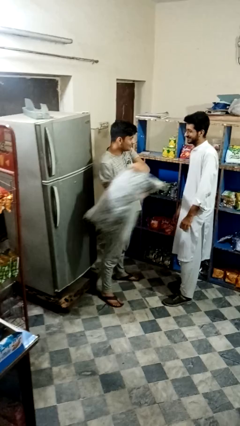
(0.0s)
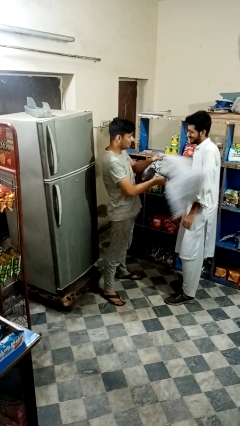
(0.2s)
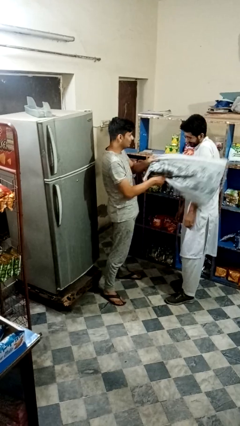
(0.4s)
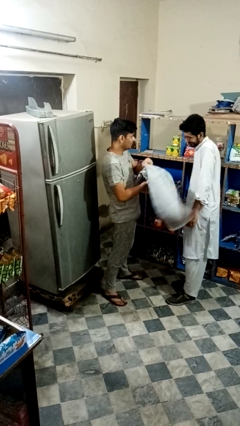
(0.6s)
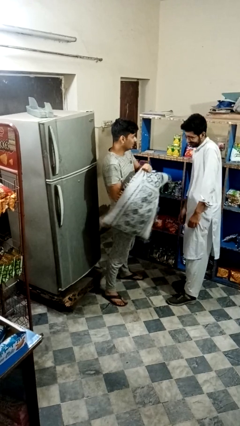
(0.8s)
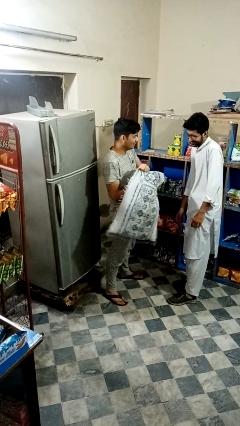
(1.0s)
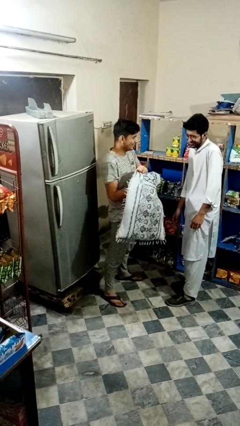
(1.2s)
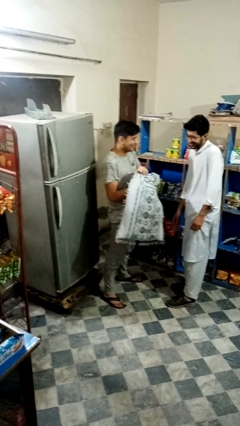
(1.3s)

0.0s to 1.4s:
person hits person with pillow

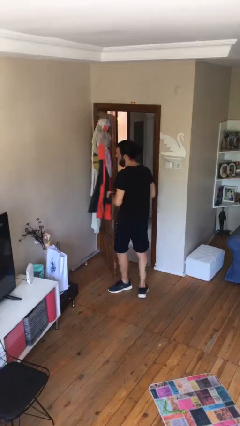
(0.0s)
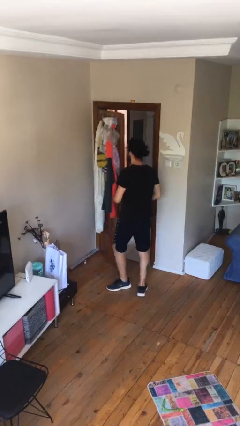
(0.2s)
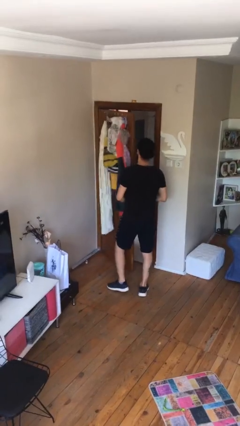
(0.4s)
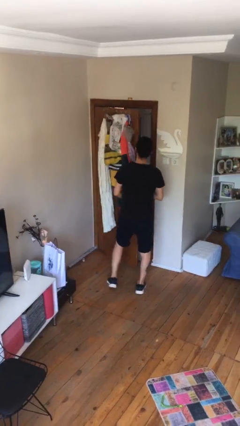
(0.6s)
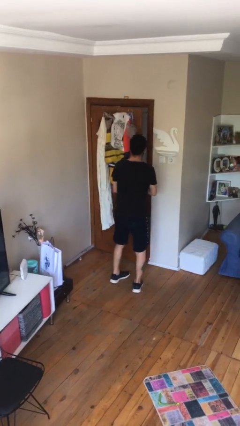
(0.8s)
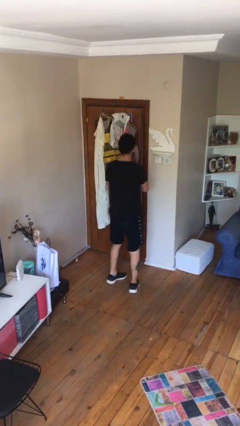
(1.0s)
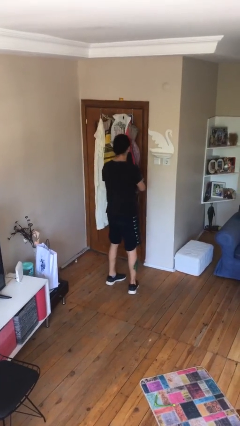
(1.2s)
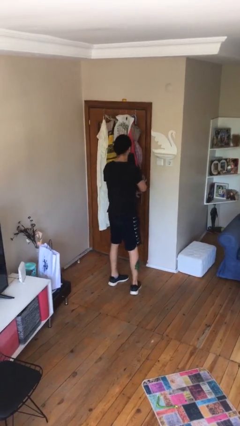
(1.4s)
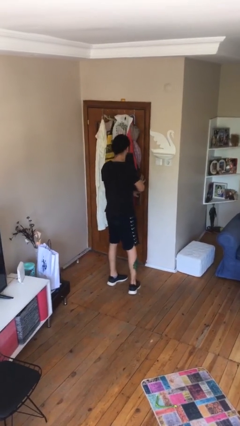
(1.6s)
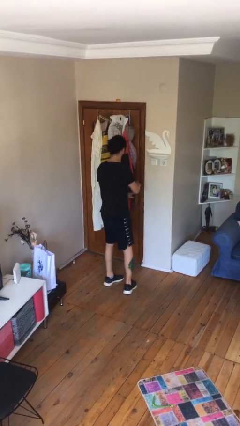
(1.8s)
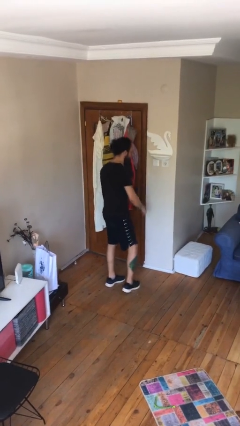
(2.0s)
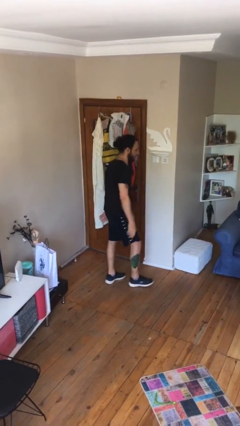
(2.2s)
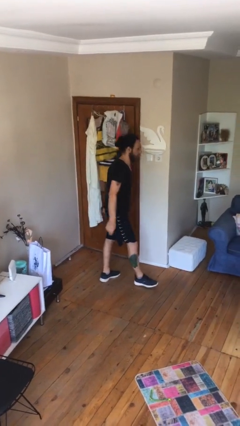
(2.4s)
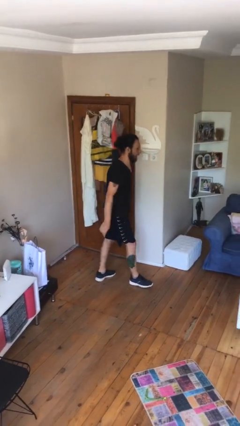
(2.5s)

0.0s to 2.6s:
person closes facility door

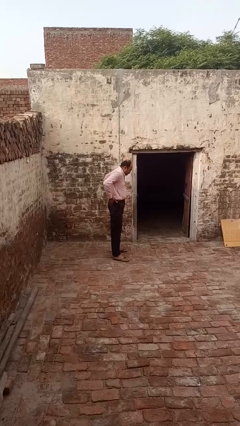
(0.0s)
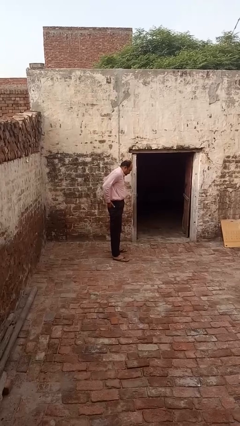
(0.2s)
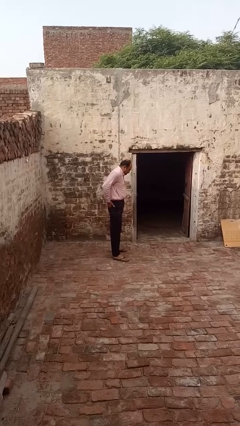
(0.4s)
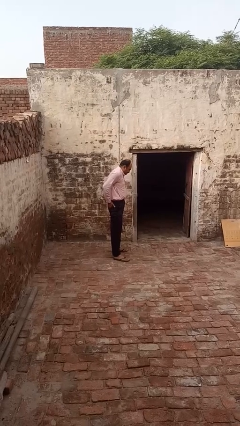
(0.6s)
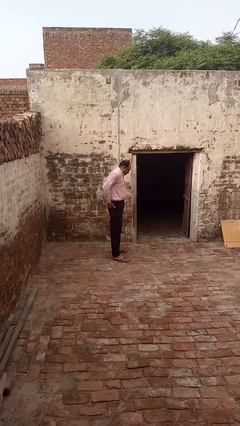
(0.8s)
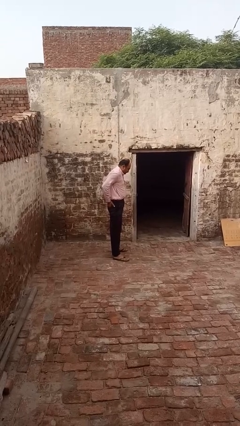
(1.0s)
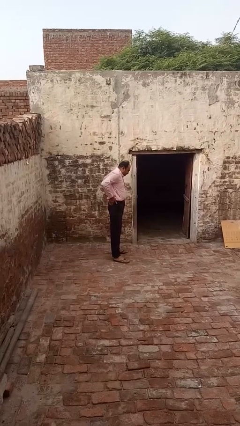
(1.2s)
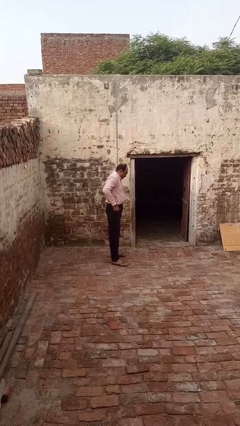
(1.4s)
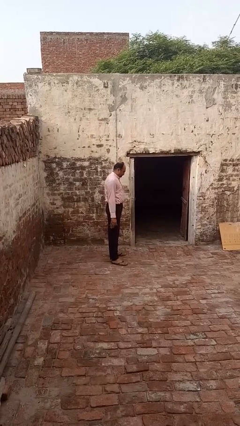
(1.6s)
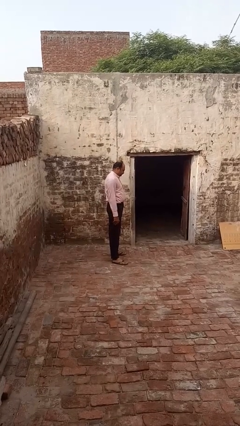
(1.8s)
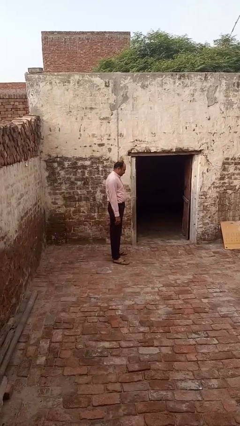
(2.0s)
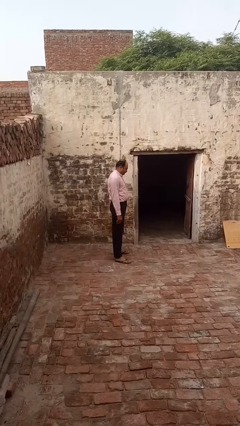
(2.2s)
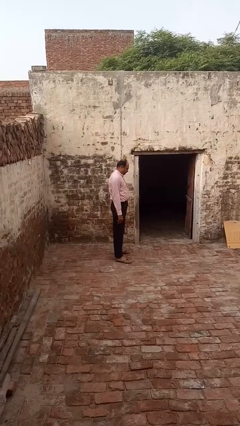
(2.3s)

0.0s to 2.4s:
person puts hands in back pockets

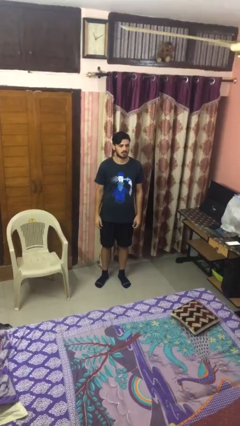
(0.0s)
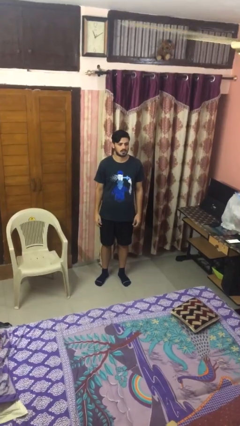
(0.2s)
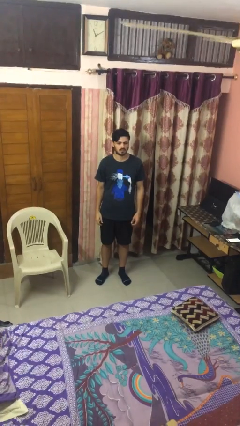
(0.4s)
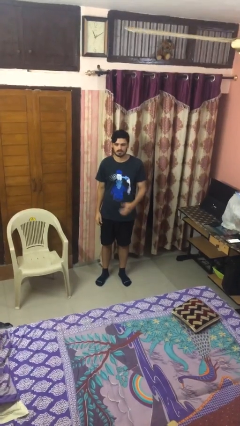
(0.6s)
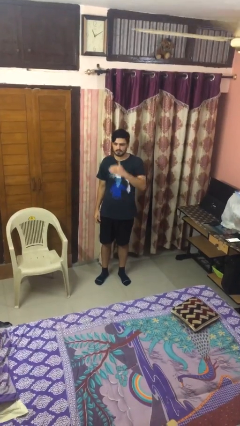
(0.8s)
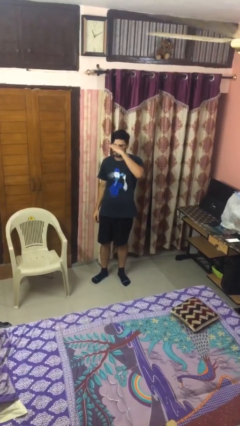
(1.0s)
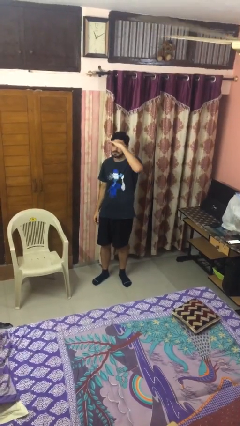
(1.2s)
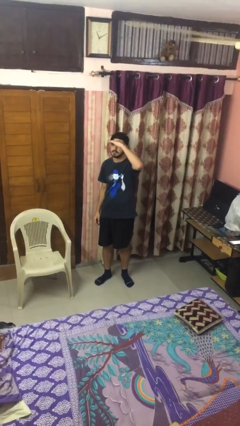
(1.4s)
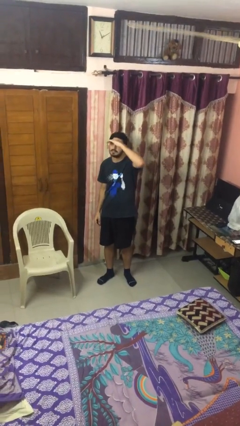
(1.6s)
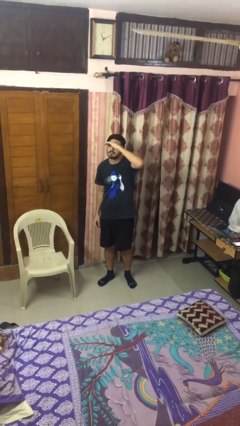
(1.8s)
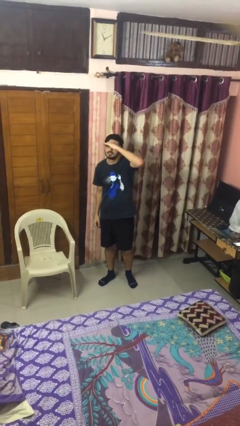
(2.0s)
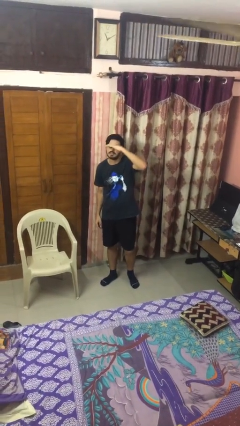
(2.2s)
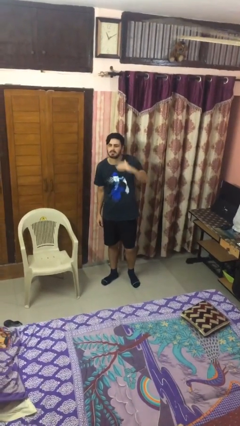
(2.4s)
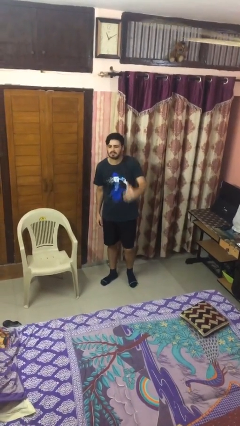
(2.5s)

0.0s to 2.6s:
person shades eyes

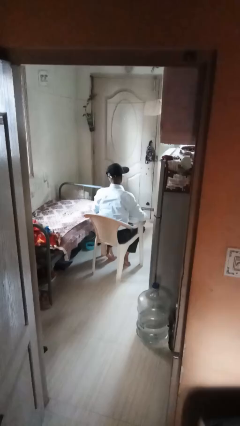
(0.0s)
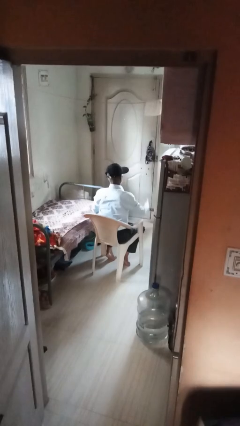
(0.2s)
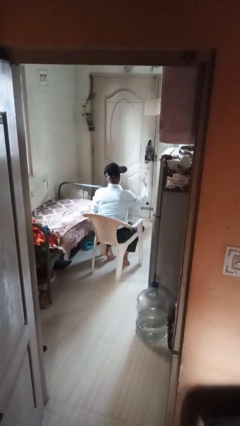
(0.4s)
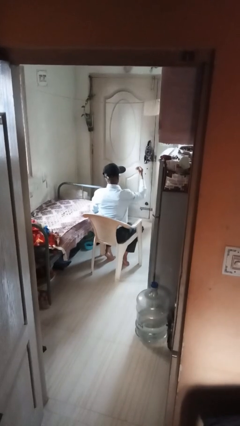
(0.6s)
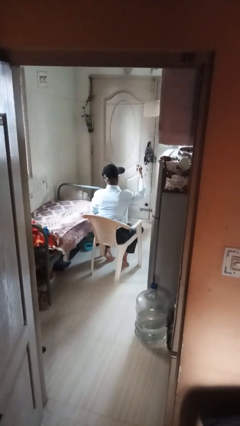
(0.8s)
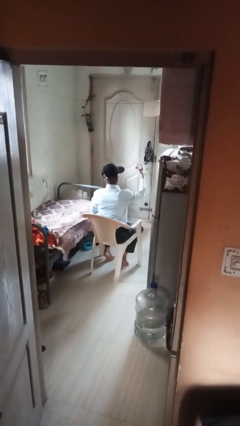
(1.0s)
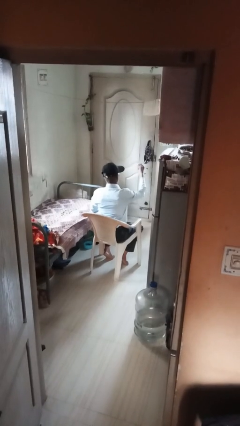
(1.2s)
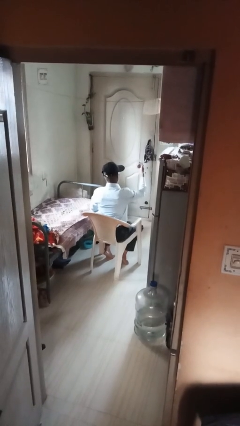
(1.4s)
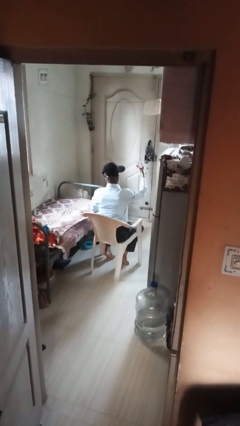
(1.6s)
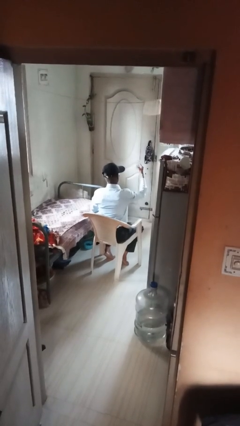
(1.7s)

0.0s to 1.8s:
person snaps fingers

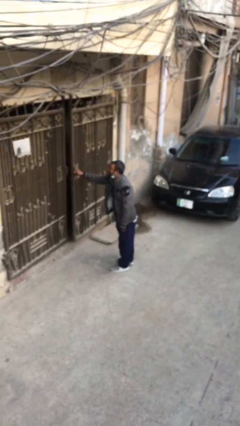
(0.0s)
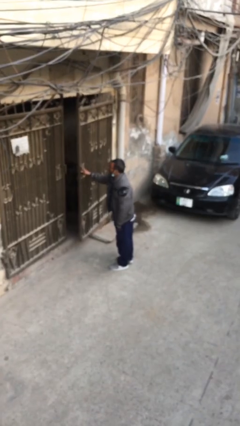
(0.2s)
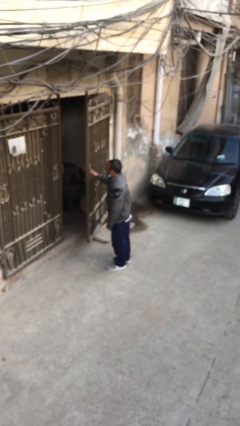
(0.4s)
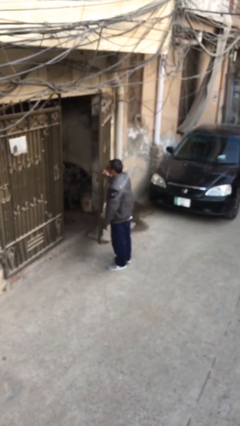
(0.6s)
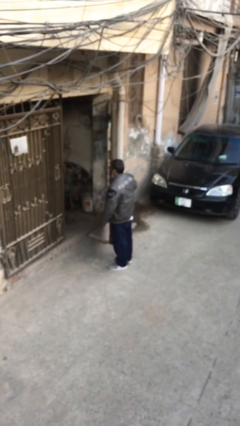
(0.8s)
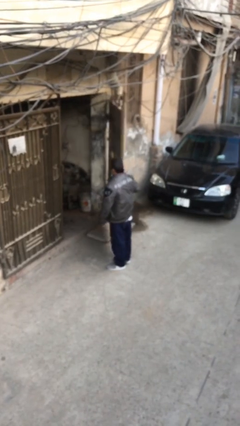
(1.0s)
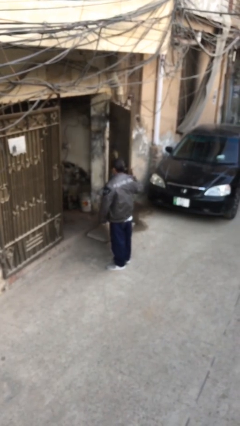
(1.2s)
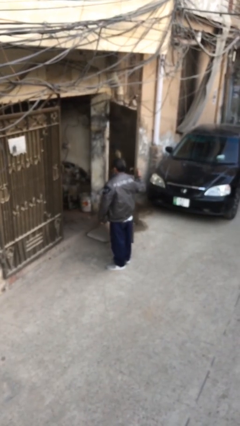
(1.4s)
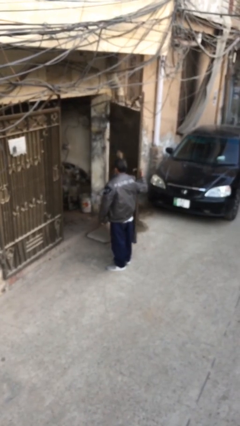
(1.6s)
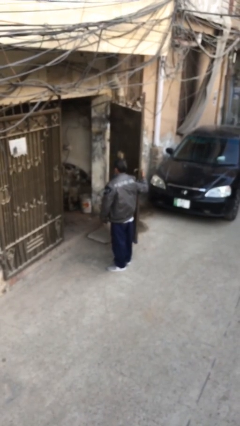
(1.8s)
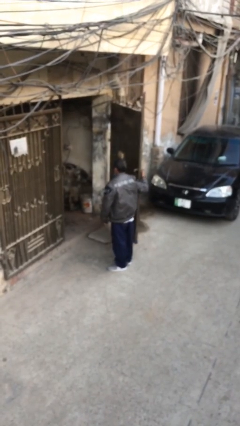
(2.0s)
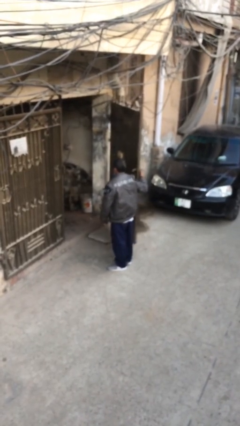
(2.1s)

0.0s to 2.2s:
person opens facility door

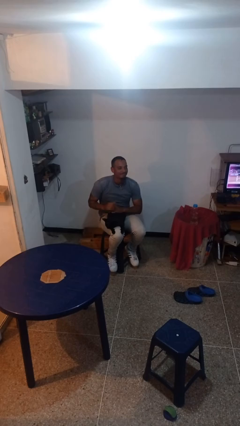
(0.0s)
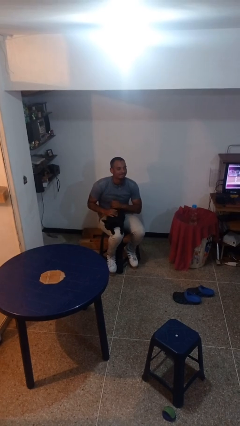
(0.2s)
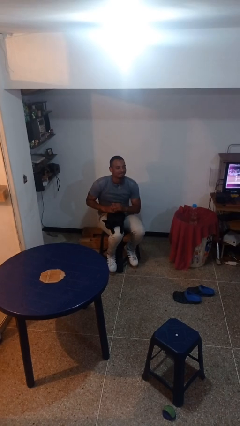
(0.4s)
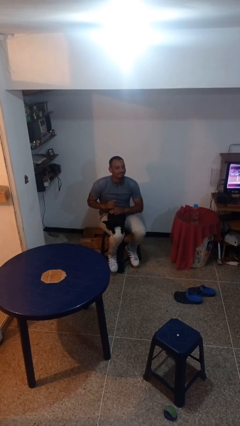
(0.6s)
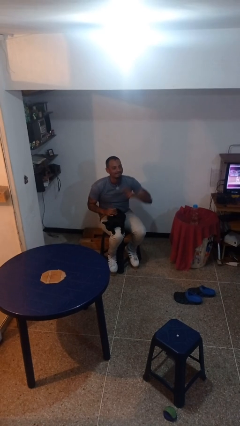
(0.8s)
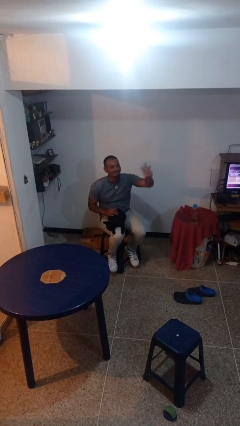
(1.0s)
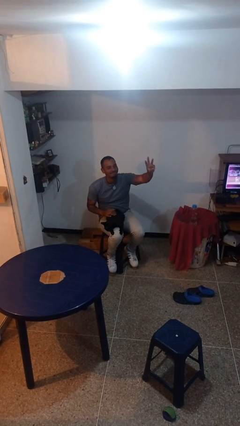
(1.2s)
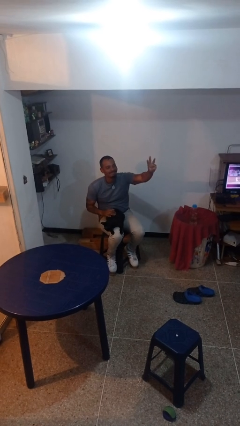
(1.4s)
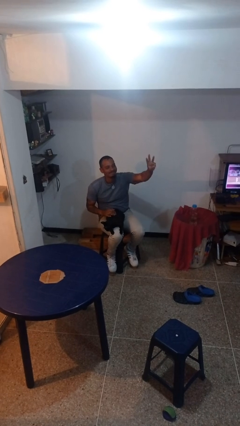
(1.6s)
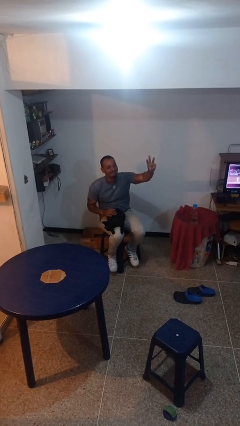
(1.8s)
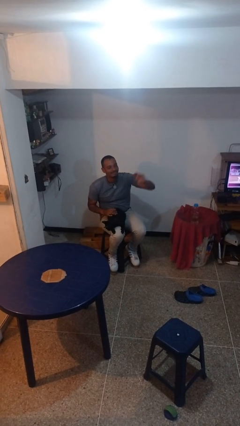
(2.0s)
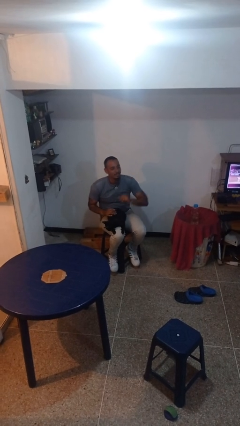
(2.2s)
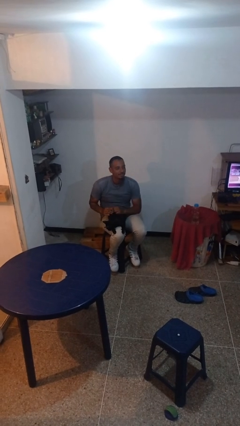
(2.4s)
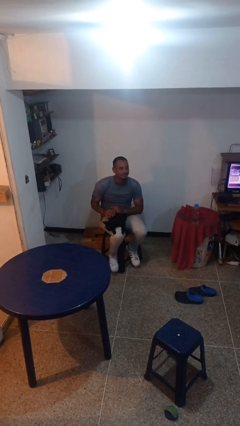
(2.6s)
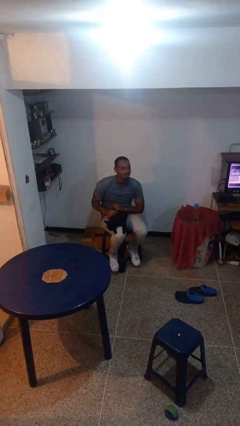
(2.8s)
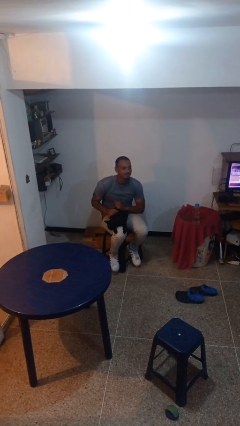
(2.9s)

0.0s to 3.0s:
person gestures number three

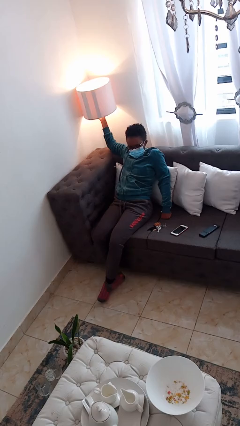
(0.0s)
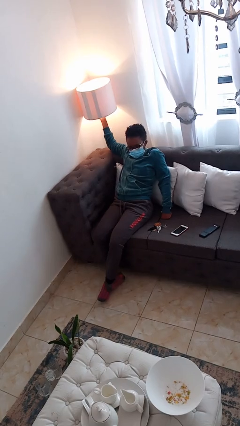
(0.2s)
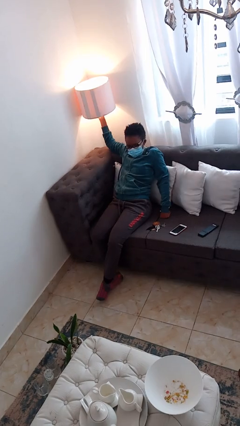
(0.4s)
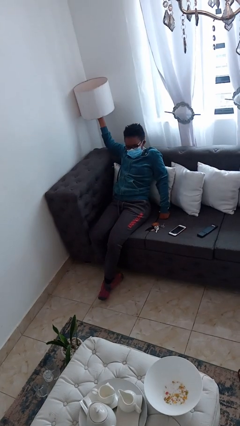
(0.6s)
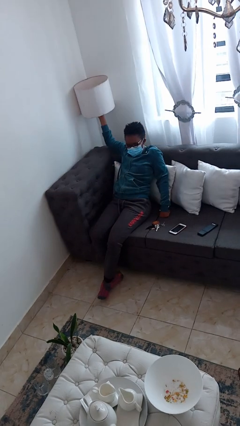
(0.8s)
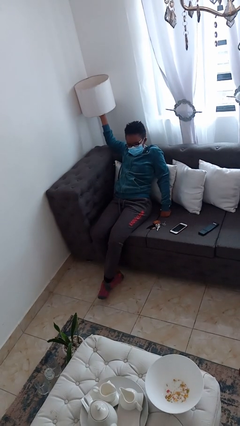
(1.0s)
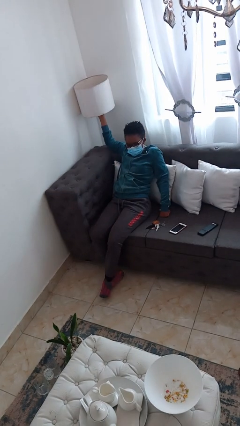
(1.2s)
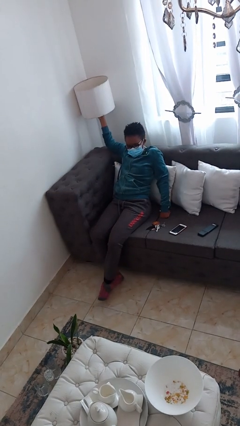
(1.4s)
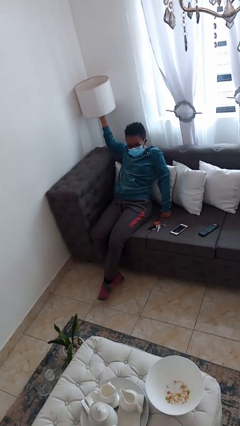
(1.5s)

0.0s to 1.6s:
person turns off lamp
